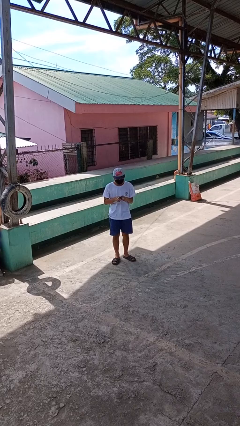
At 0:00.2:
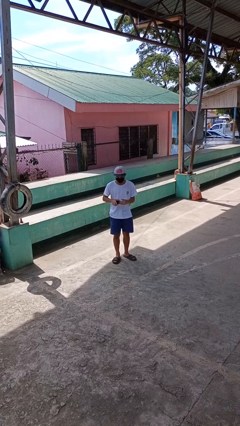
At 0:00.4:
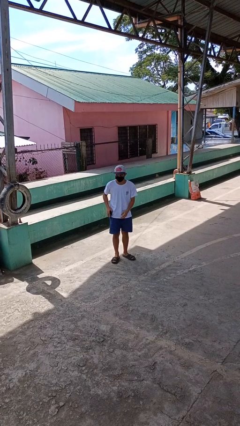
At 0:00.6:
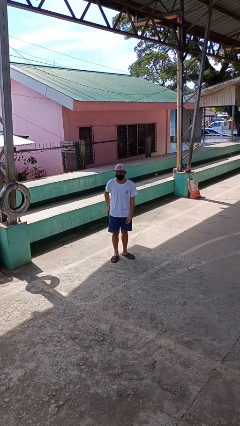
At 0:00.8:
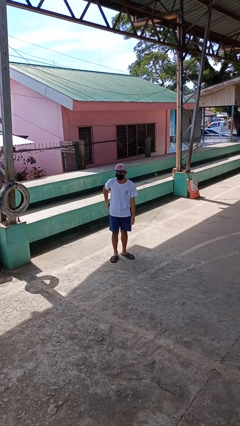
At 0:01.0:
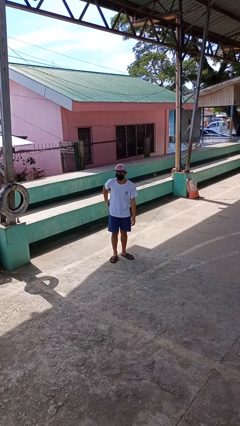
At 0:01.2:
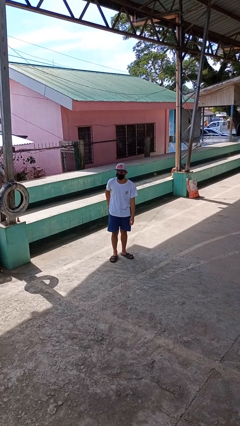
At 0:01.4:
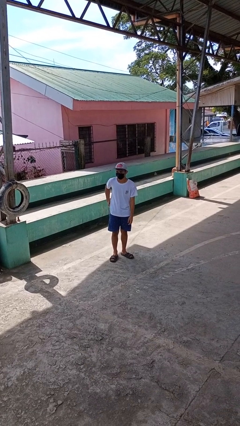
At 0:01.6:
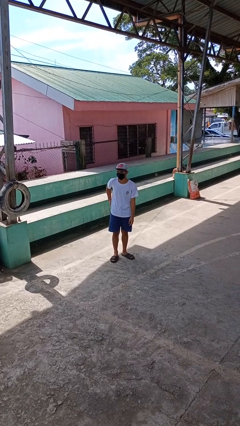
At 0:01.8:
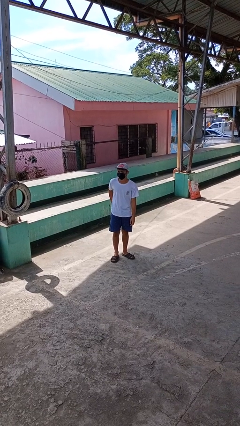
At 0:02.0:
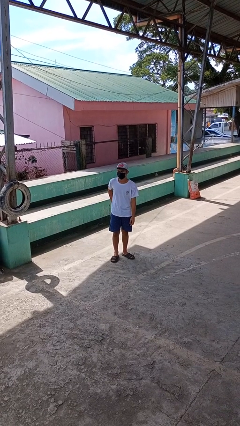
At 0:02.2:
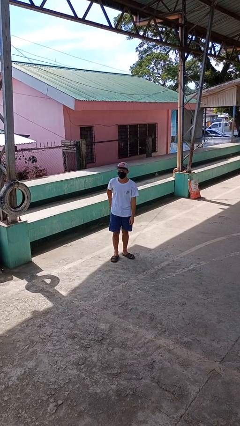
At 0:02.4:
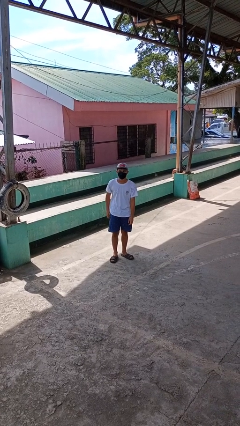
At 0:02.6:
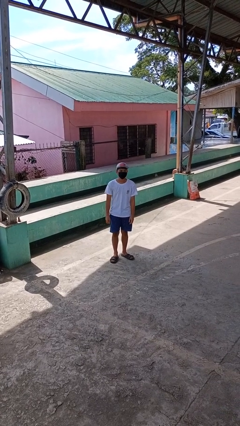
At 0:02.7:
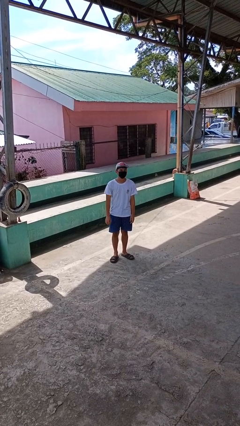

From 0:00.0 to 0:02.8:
person puts phone into pocket

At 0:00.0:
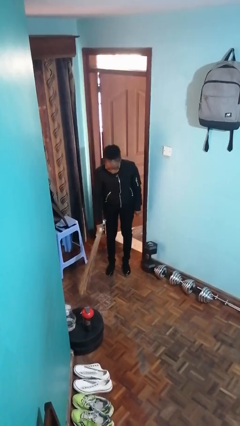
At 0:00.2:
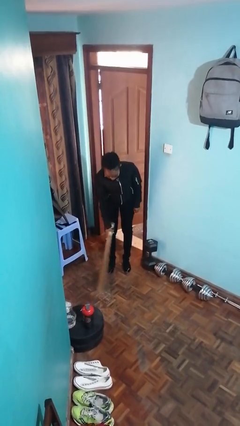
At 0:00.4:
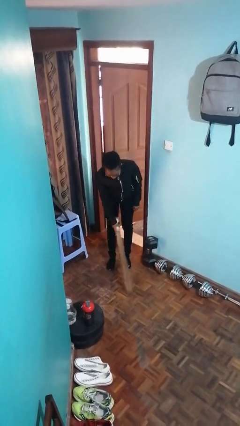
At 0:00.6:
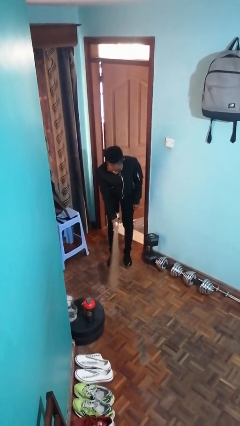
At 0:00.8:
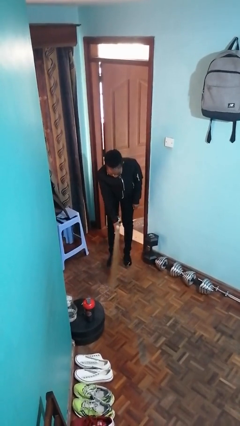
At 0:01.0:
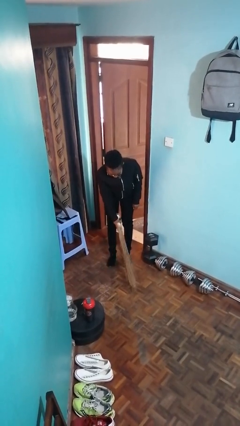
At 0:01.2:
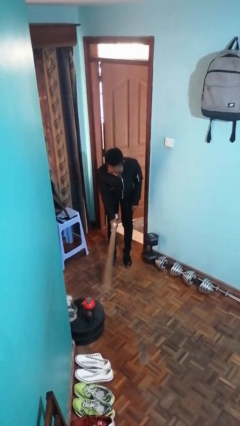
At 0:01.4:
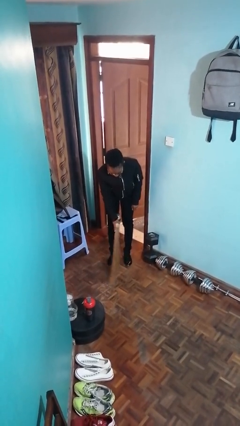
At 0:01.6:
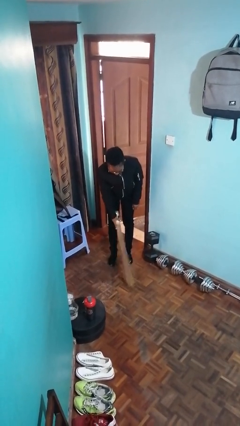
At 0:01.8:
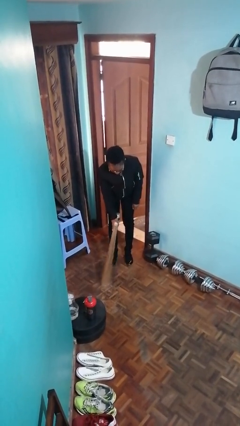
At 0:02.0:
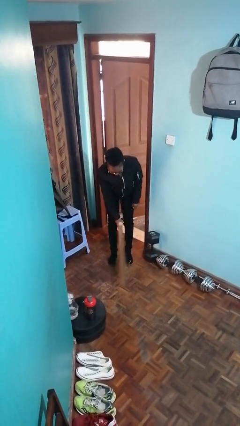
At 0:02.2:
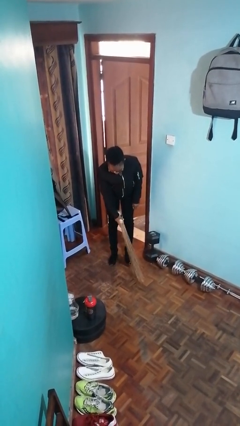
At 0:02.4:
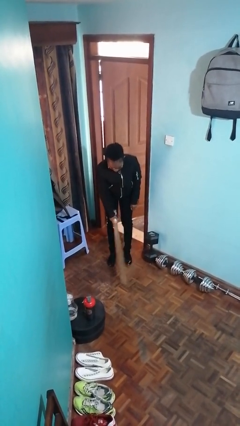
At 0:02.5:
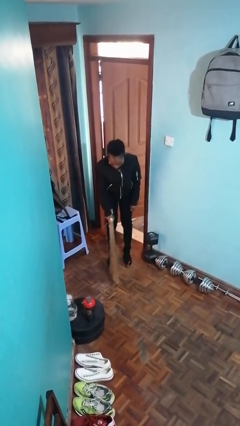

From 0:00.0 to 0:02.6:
person sweeps floor

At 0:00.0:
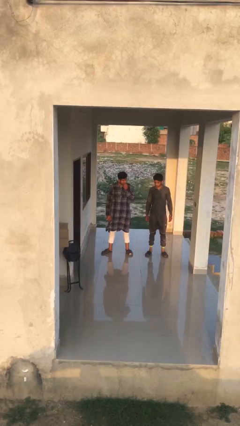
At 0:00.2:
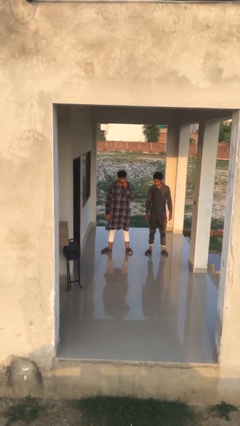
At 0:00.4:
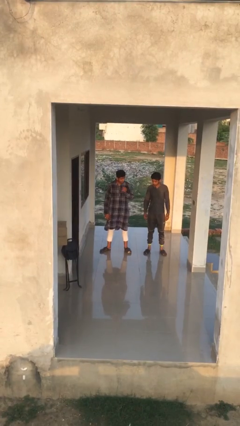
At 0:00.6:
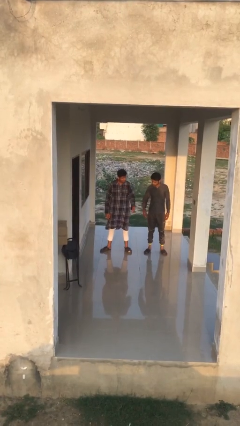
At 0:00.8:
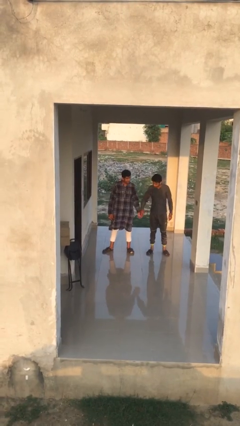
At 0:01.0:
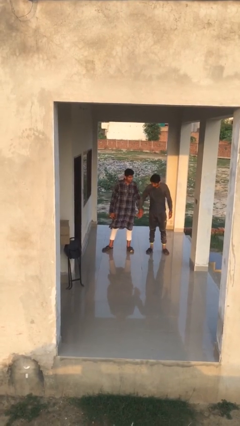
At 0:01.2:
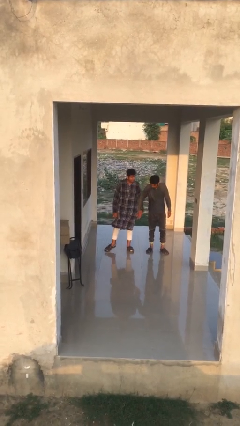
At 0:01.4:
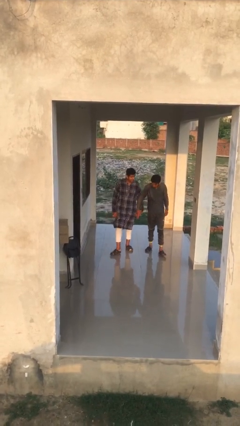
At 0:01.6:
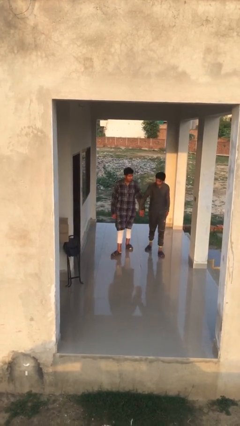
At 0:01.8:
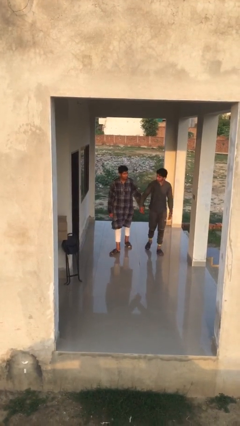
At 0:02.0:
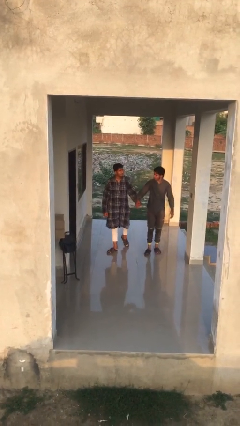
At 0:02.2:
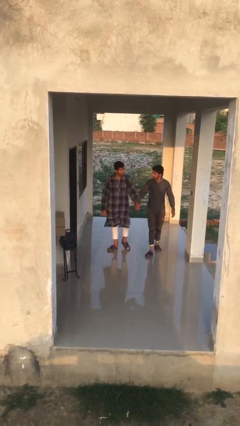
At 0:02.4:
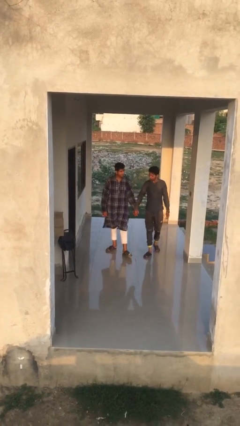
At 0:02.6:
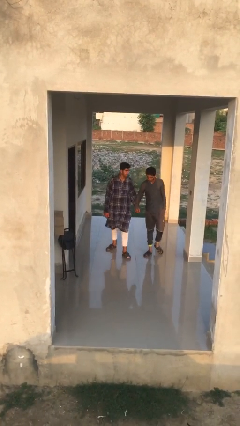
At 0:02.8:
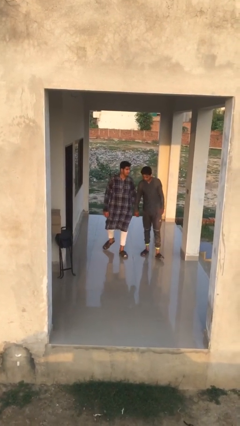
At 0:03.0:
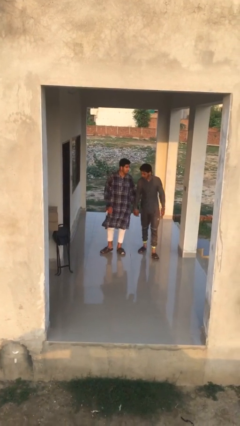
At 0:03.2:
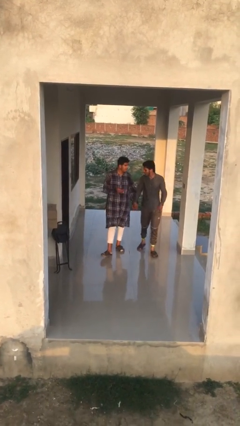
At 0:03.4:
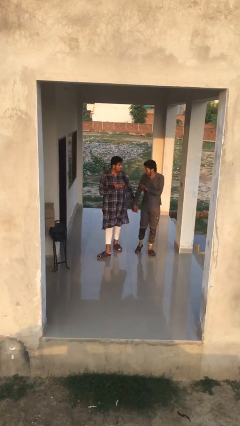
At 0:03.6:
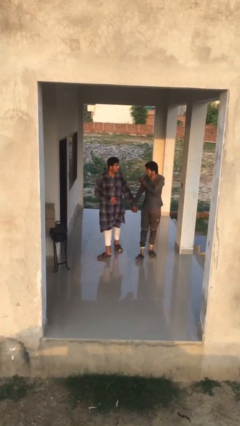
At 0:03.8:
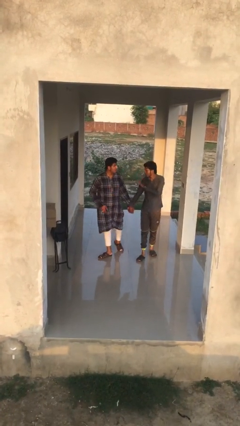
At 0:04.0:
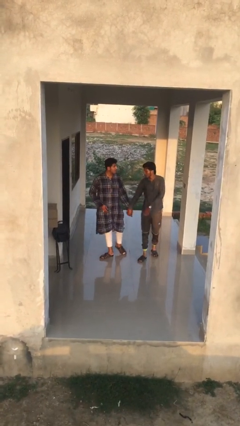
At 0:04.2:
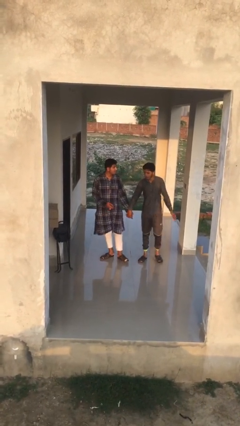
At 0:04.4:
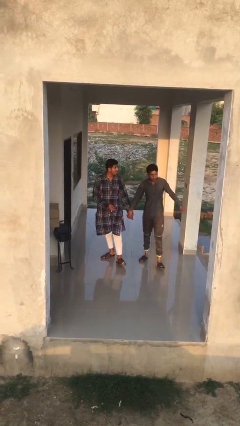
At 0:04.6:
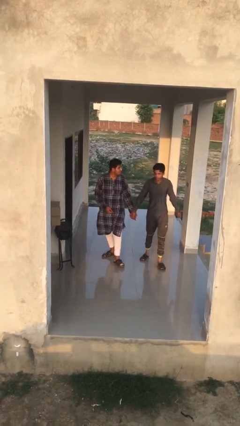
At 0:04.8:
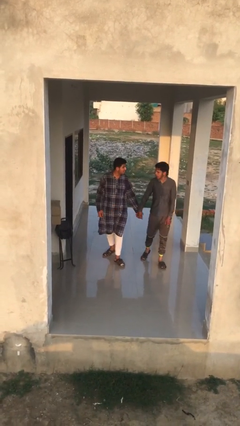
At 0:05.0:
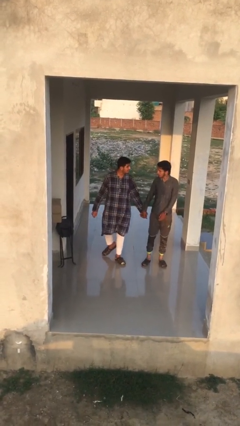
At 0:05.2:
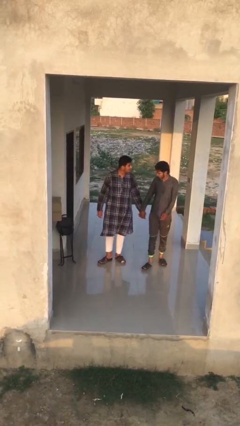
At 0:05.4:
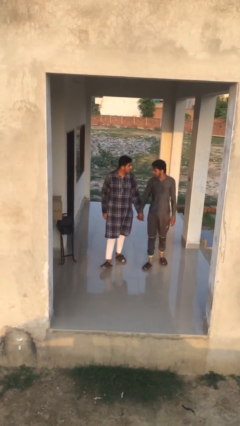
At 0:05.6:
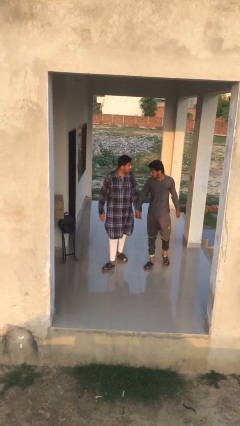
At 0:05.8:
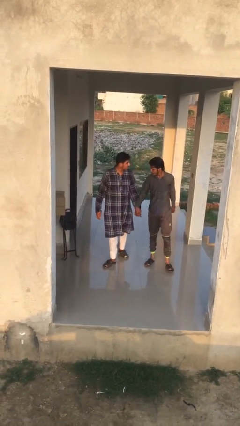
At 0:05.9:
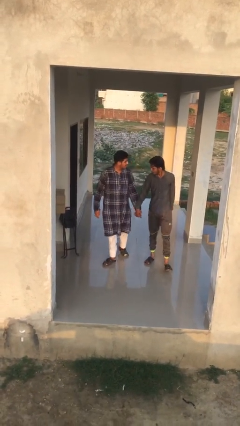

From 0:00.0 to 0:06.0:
person holds hand

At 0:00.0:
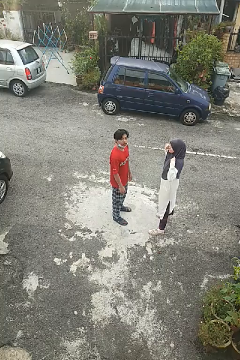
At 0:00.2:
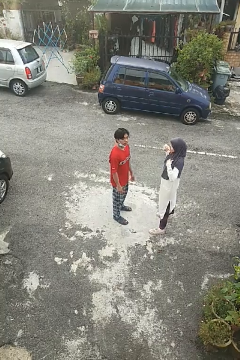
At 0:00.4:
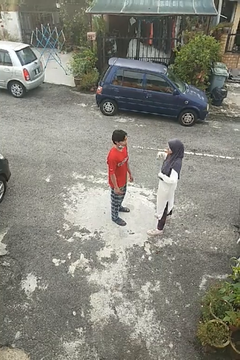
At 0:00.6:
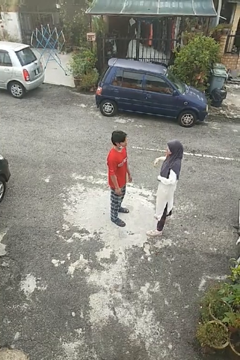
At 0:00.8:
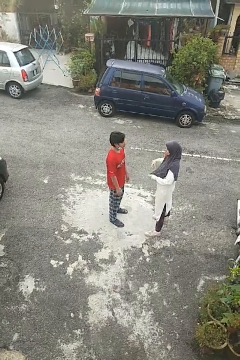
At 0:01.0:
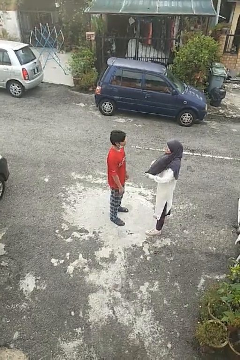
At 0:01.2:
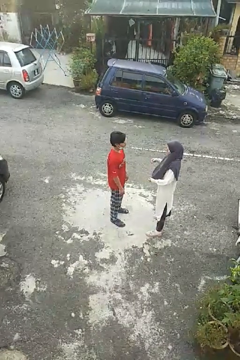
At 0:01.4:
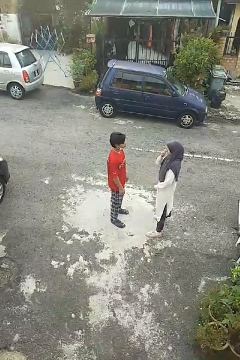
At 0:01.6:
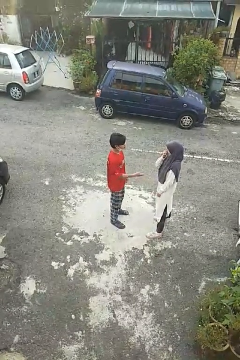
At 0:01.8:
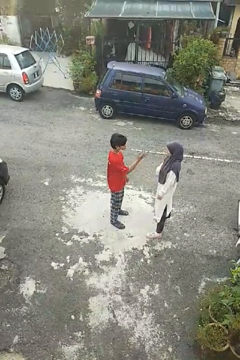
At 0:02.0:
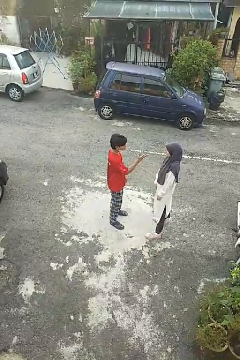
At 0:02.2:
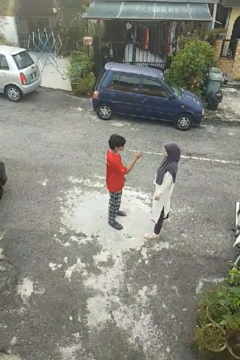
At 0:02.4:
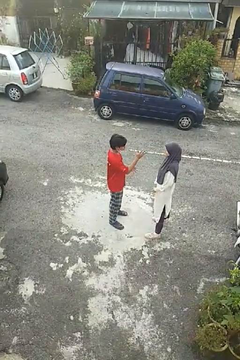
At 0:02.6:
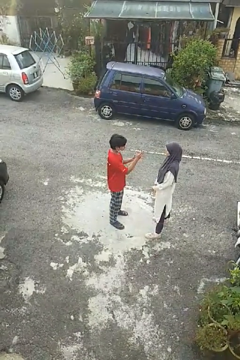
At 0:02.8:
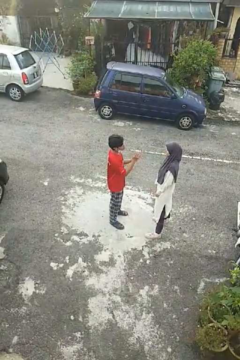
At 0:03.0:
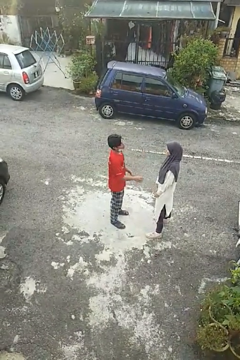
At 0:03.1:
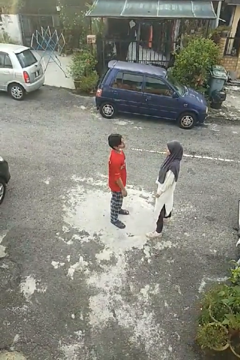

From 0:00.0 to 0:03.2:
person talks to person

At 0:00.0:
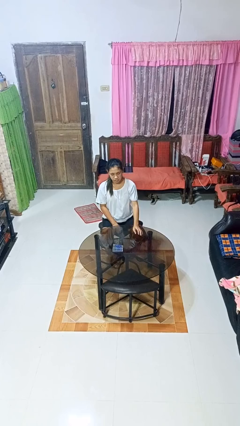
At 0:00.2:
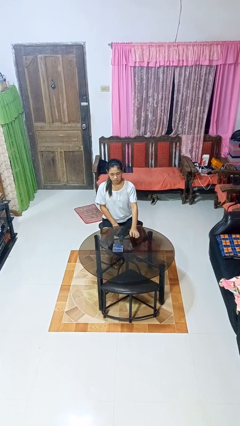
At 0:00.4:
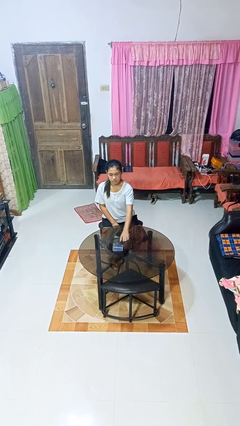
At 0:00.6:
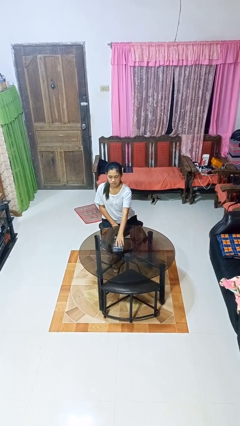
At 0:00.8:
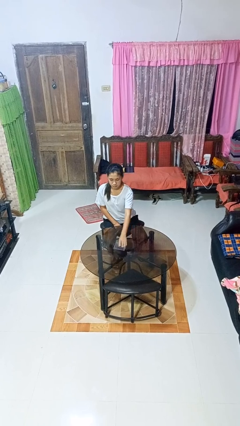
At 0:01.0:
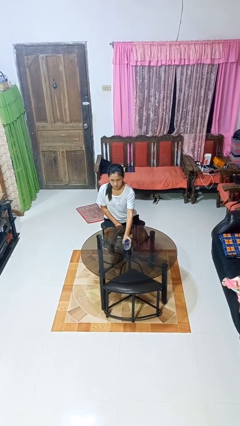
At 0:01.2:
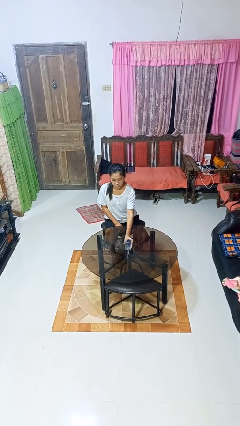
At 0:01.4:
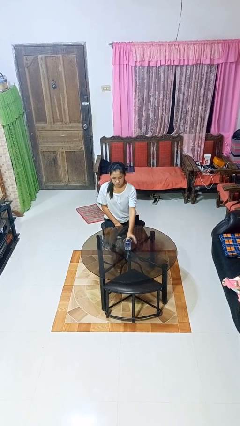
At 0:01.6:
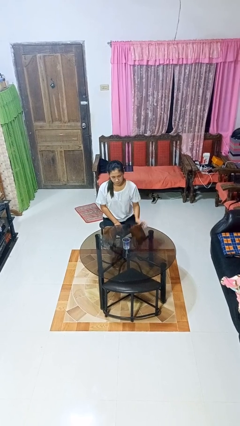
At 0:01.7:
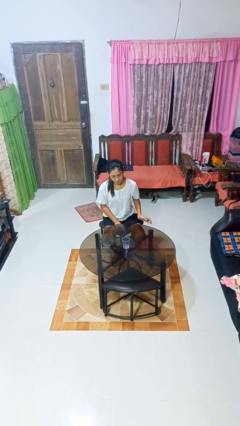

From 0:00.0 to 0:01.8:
person sets upright glass

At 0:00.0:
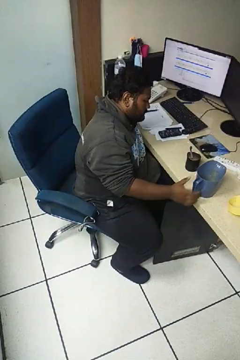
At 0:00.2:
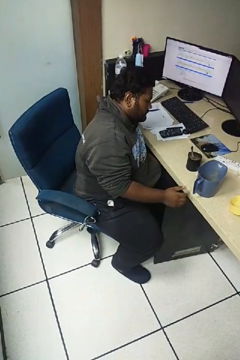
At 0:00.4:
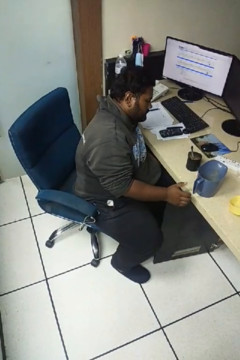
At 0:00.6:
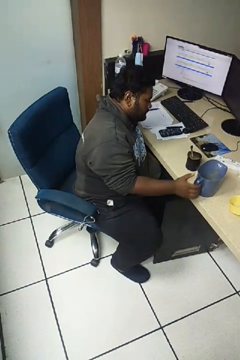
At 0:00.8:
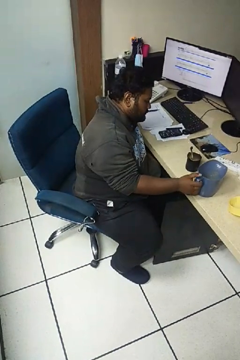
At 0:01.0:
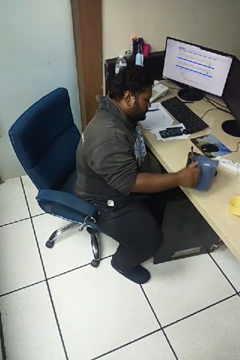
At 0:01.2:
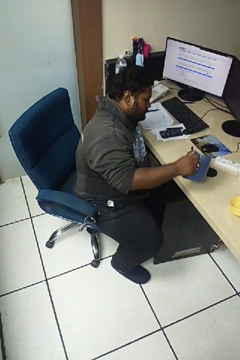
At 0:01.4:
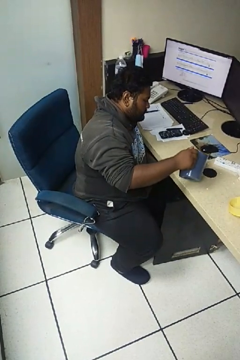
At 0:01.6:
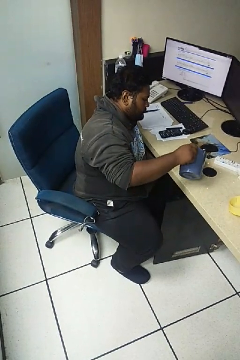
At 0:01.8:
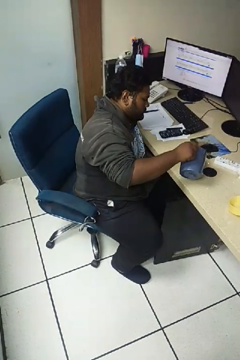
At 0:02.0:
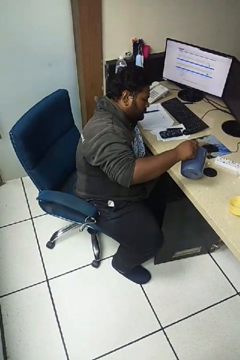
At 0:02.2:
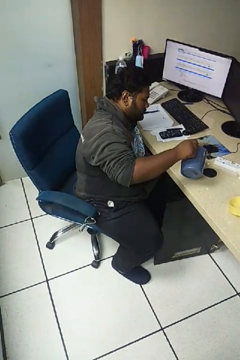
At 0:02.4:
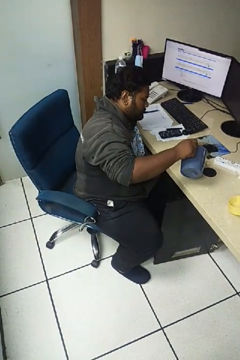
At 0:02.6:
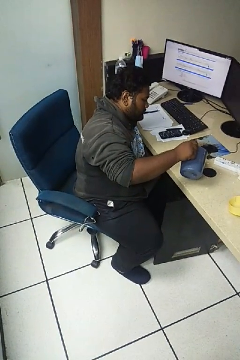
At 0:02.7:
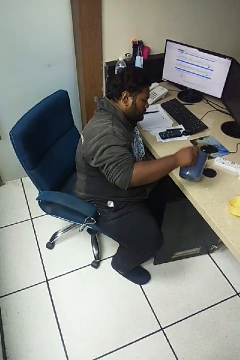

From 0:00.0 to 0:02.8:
person pours coffee into mug
